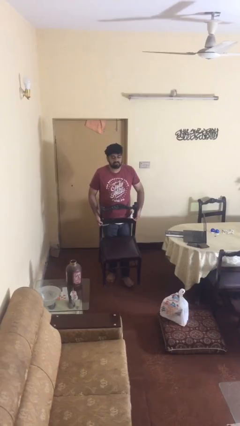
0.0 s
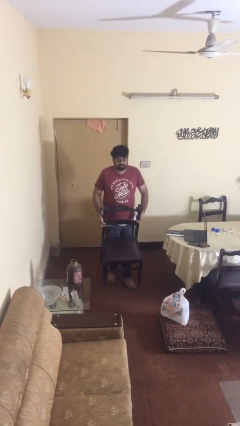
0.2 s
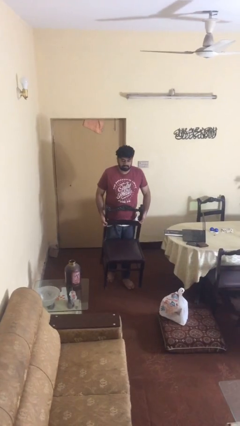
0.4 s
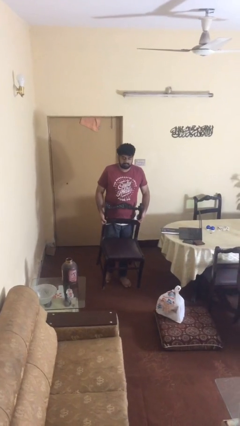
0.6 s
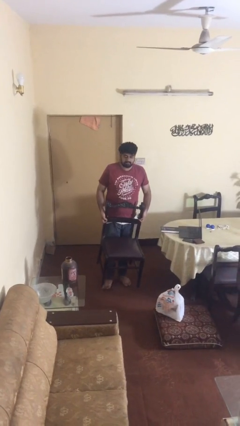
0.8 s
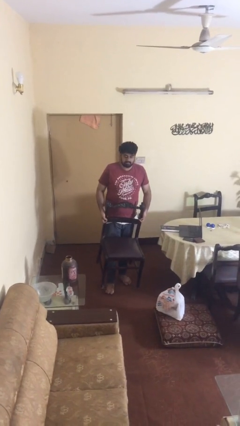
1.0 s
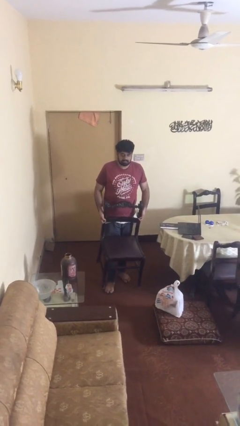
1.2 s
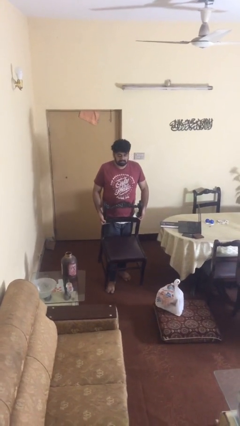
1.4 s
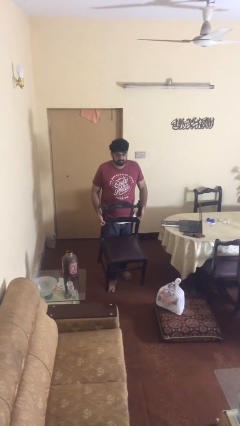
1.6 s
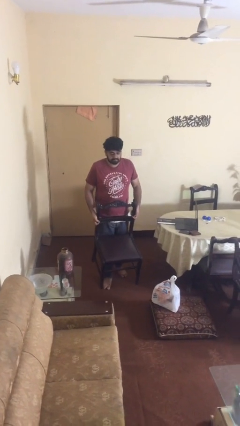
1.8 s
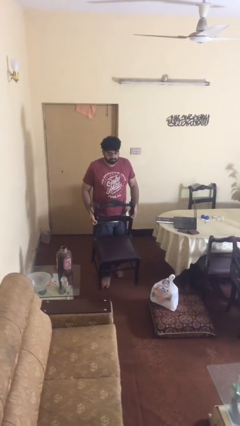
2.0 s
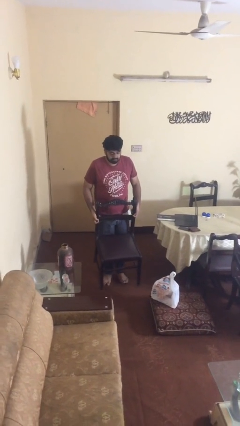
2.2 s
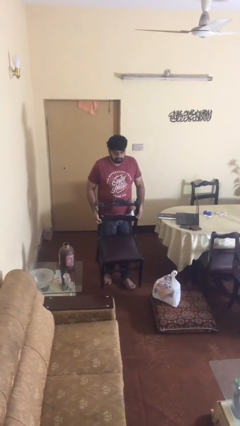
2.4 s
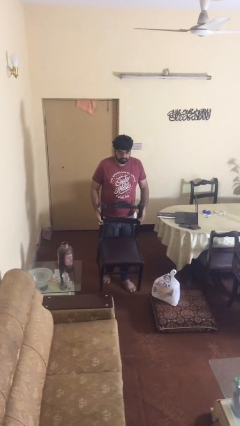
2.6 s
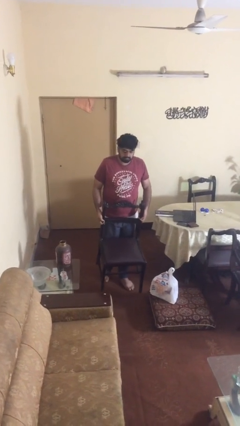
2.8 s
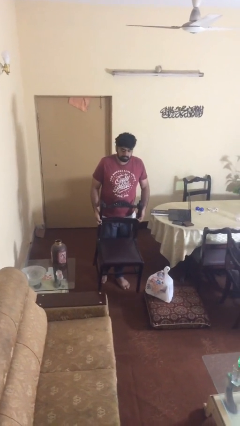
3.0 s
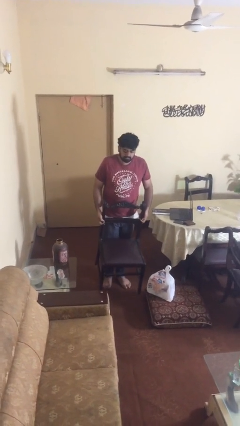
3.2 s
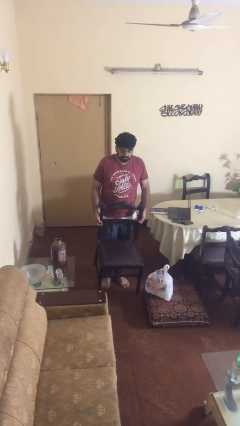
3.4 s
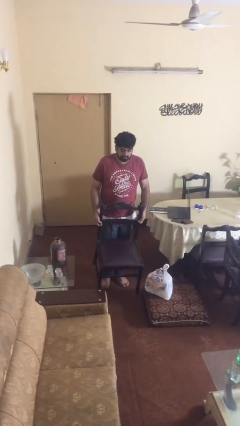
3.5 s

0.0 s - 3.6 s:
person carries heavy object

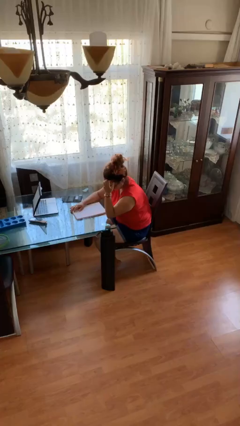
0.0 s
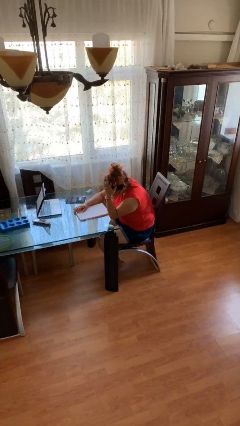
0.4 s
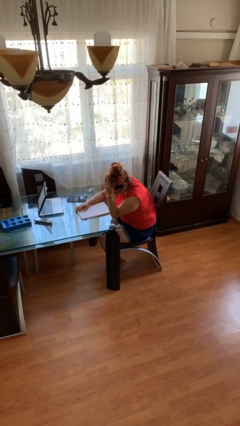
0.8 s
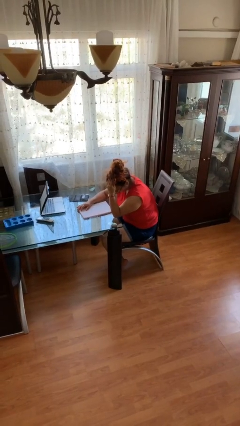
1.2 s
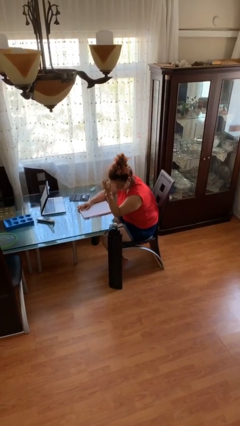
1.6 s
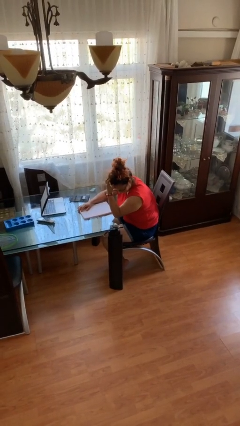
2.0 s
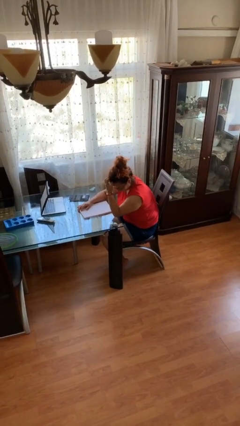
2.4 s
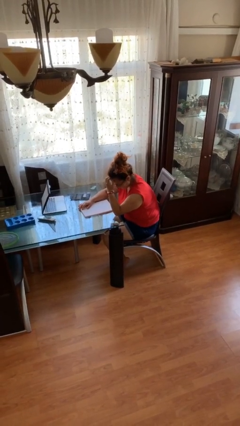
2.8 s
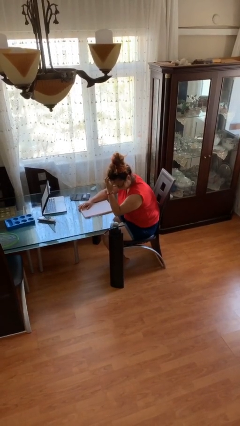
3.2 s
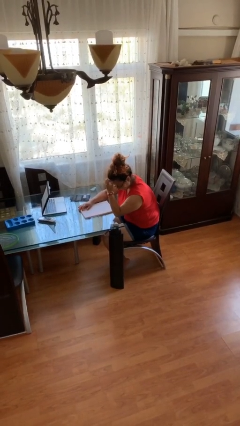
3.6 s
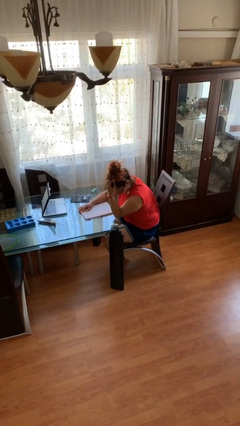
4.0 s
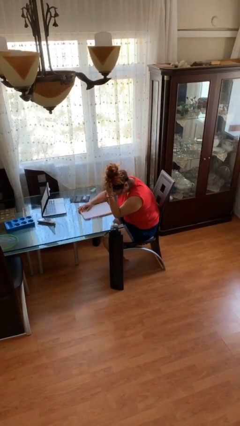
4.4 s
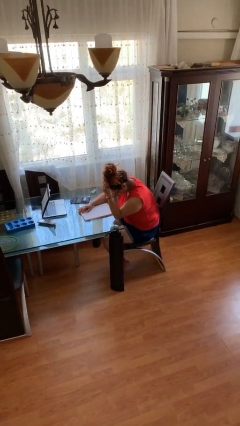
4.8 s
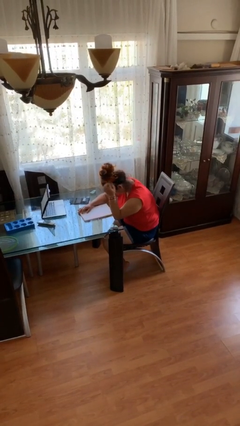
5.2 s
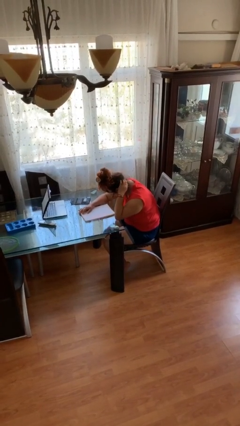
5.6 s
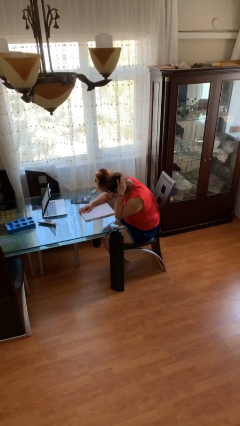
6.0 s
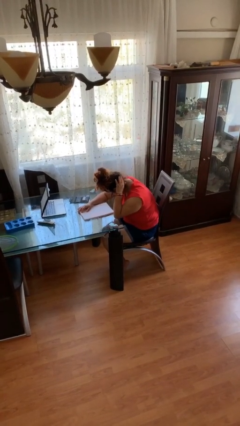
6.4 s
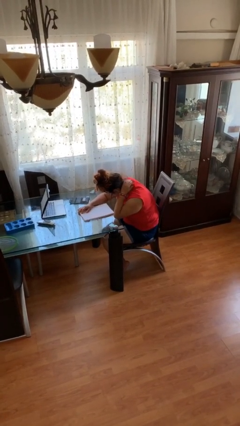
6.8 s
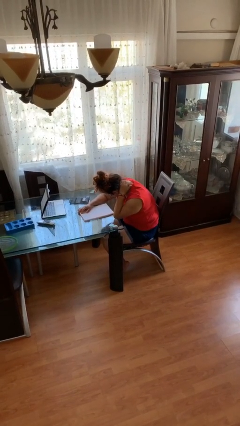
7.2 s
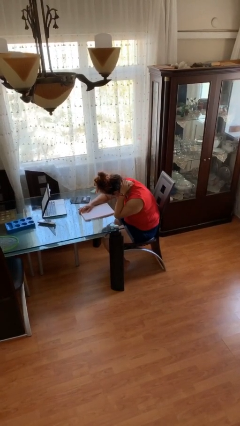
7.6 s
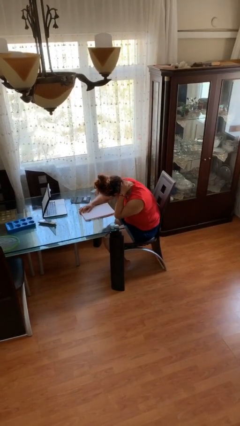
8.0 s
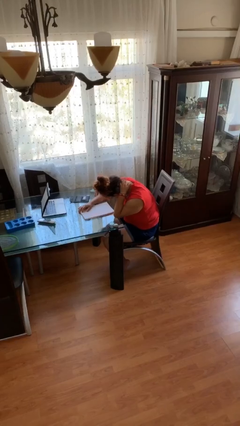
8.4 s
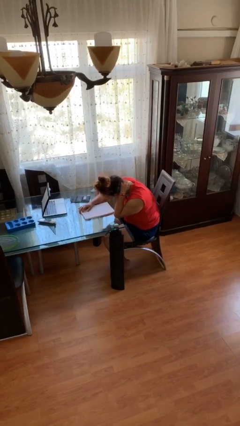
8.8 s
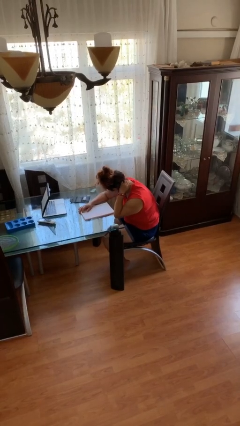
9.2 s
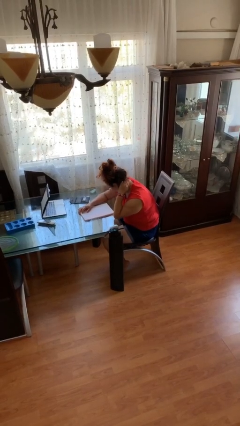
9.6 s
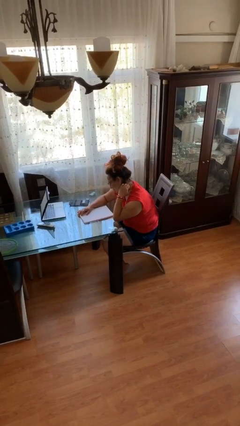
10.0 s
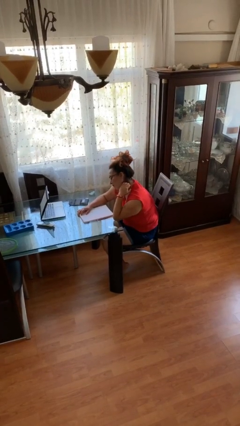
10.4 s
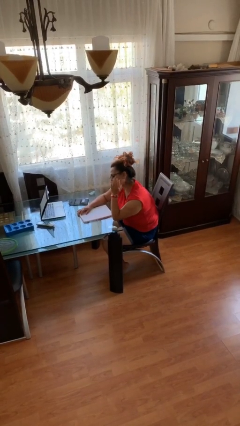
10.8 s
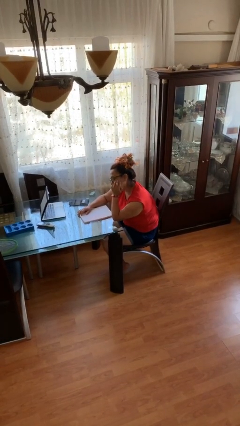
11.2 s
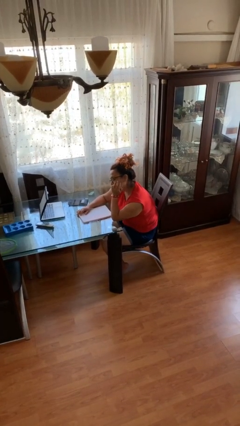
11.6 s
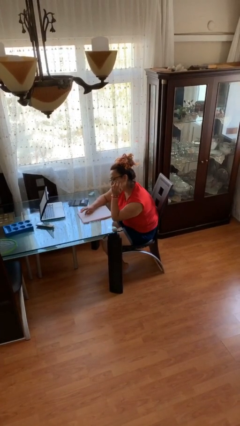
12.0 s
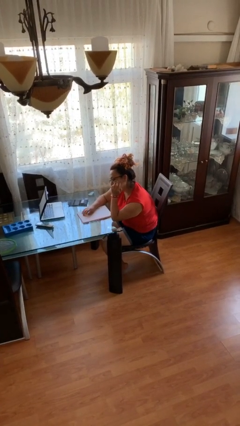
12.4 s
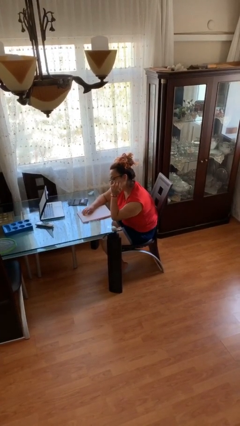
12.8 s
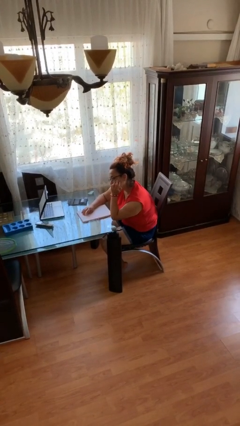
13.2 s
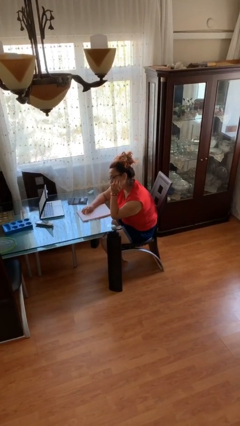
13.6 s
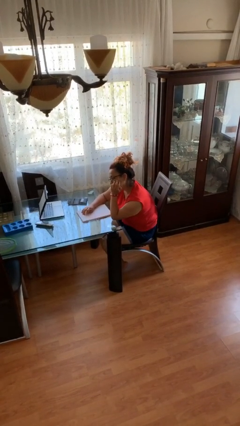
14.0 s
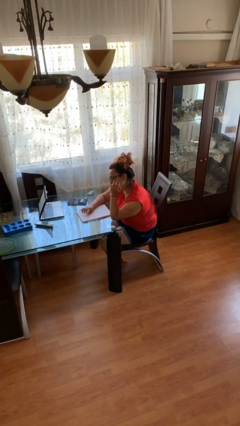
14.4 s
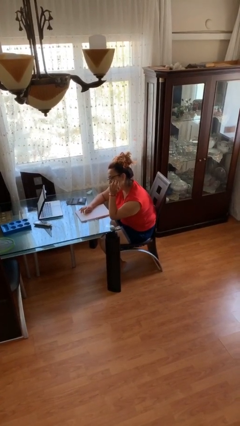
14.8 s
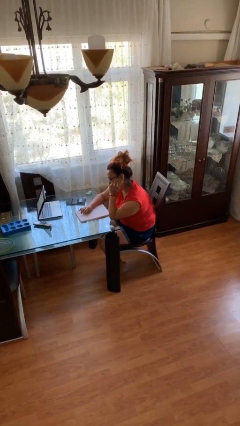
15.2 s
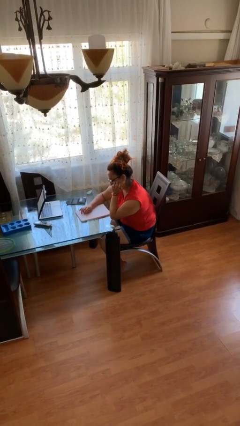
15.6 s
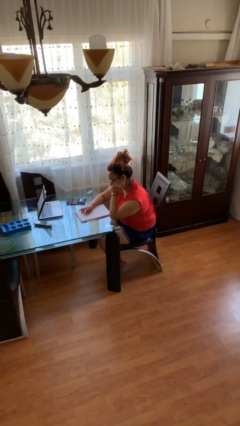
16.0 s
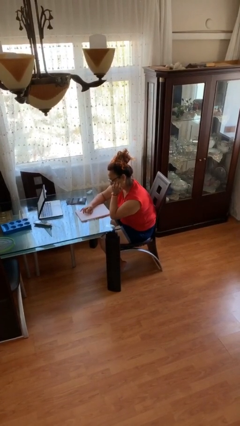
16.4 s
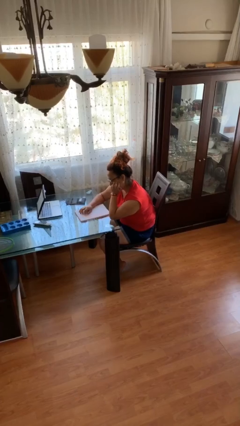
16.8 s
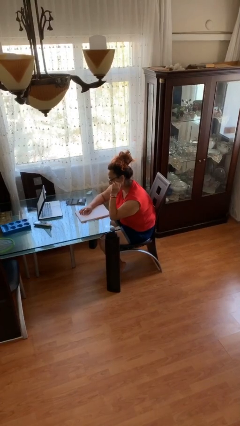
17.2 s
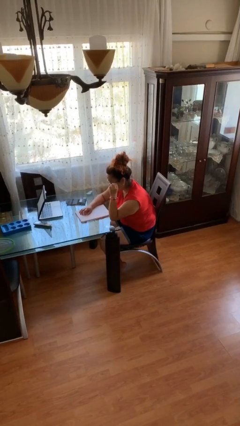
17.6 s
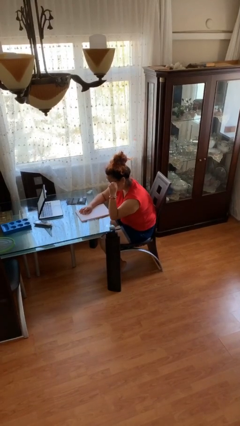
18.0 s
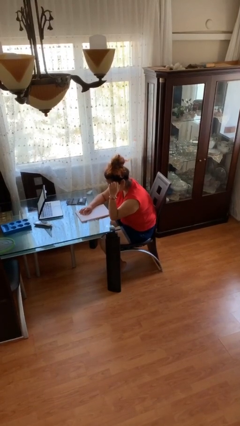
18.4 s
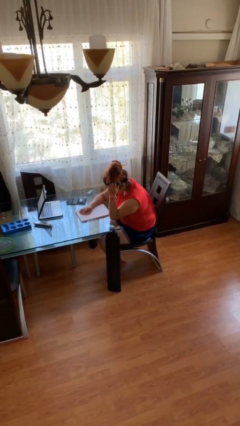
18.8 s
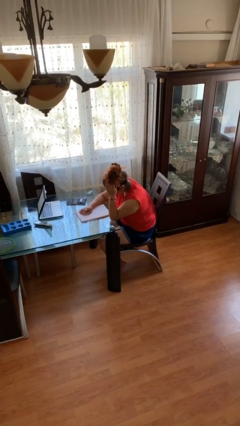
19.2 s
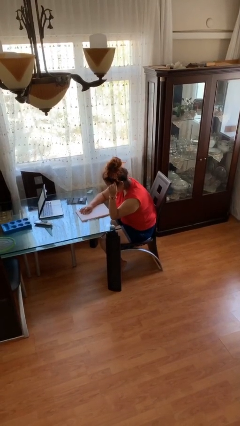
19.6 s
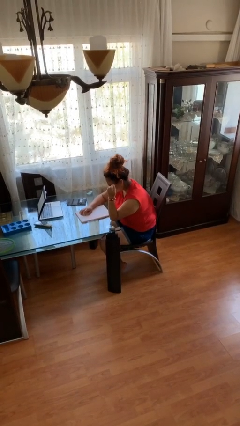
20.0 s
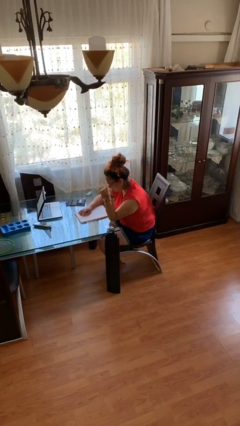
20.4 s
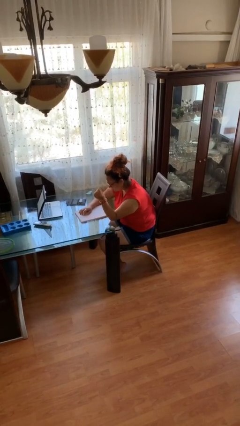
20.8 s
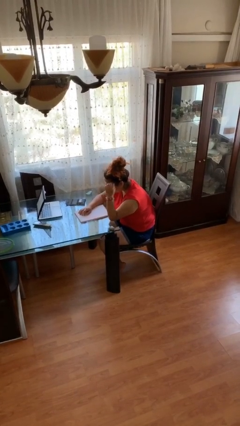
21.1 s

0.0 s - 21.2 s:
person reads document

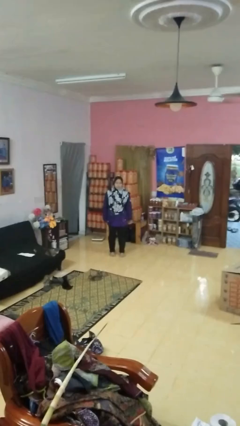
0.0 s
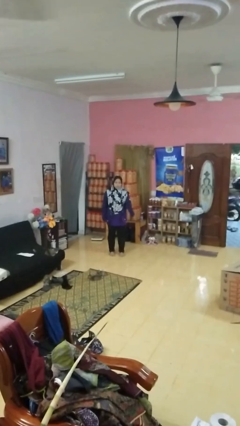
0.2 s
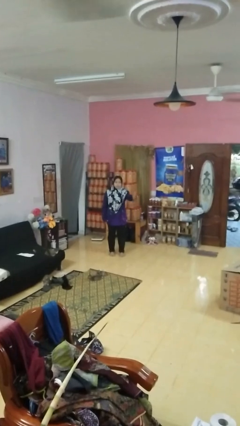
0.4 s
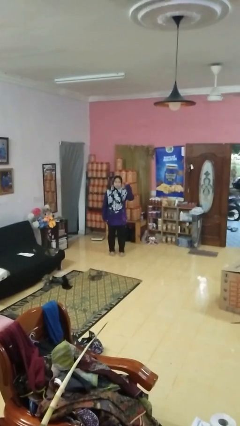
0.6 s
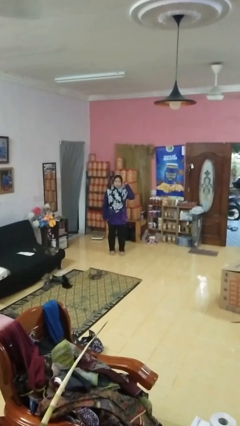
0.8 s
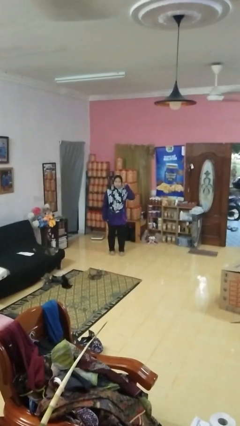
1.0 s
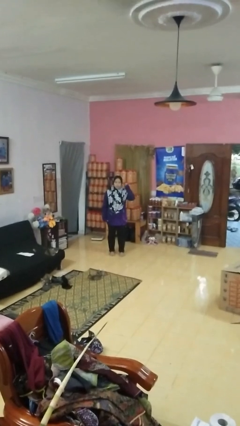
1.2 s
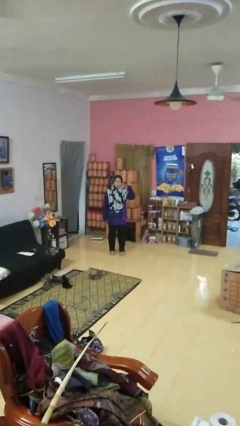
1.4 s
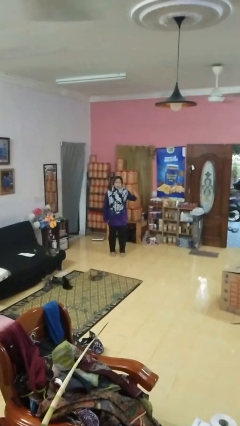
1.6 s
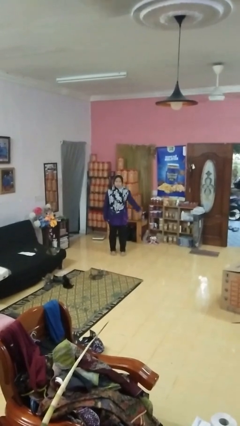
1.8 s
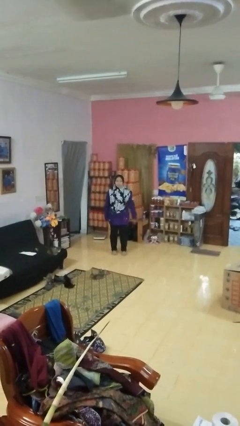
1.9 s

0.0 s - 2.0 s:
person gestures behind me

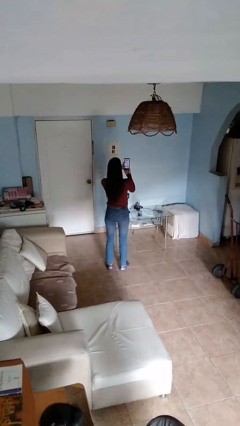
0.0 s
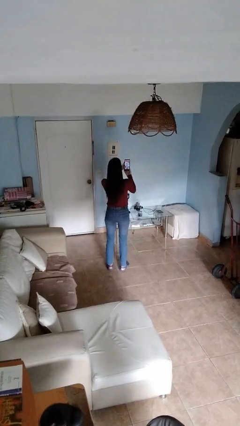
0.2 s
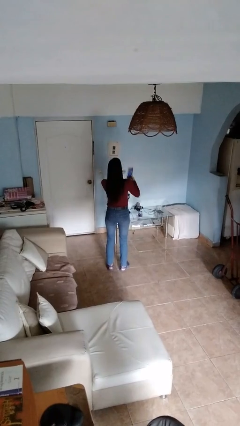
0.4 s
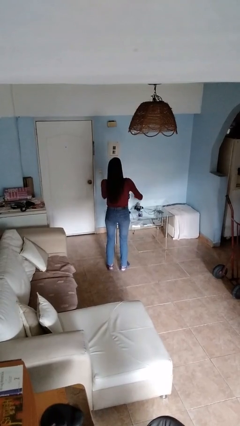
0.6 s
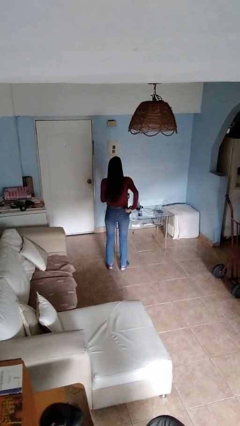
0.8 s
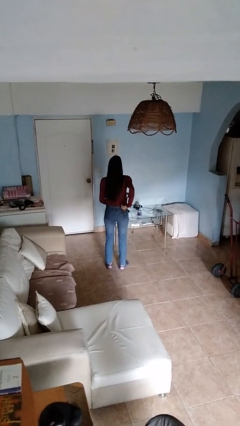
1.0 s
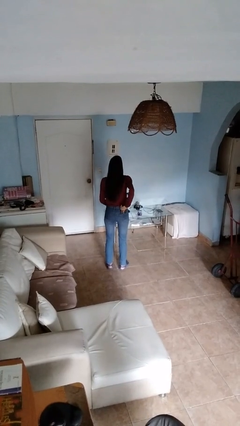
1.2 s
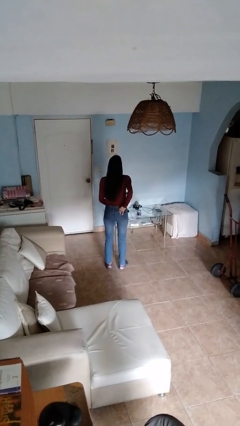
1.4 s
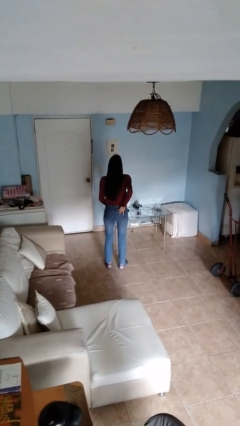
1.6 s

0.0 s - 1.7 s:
person puts phone into pocket
